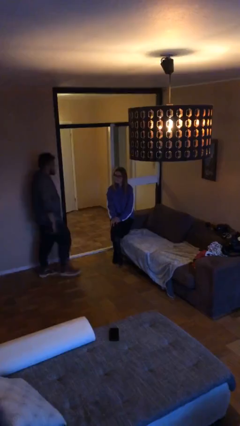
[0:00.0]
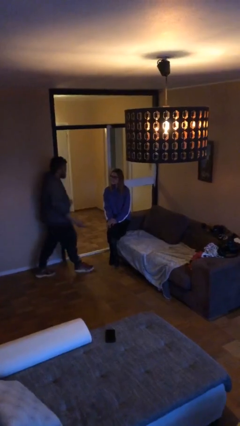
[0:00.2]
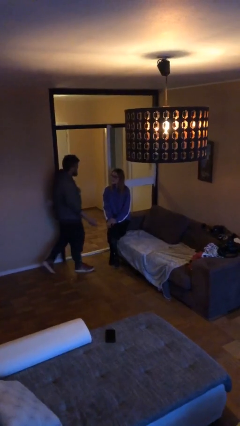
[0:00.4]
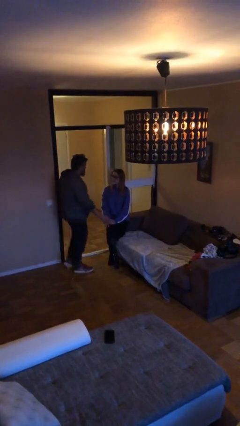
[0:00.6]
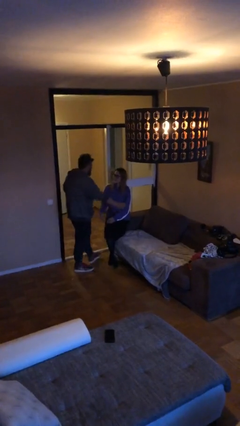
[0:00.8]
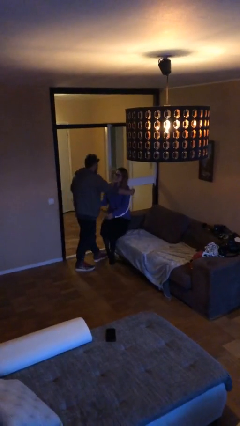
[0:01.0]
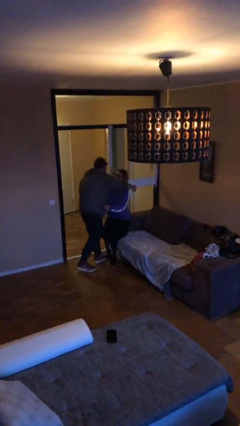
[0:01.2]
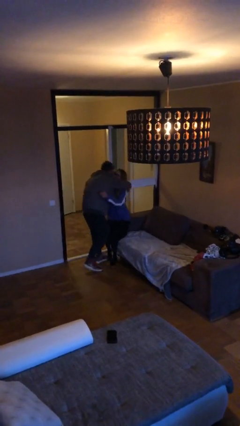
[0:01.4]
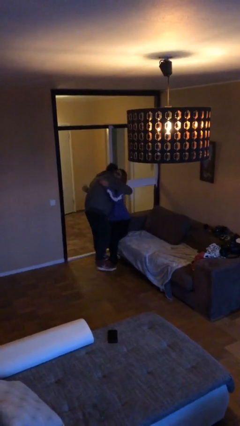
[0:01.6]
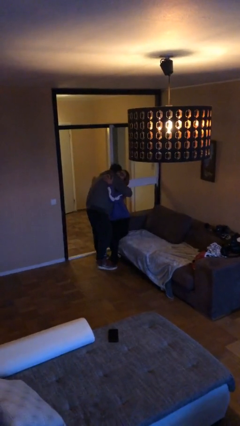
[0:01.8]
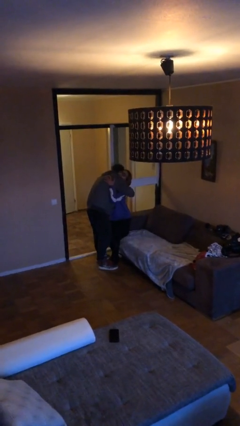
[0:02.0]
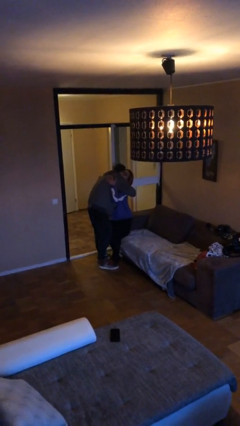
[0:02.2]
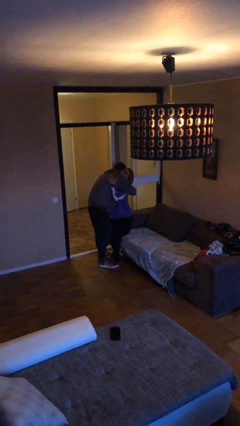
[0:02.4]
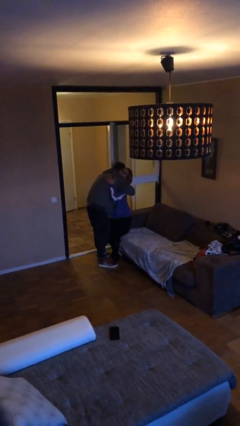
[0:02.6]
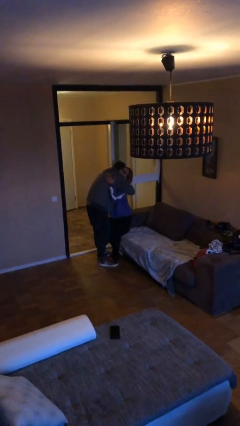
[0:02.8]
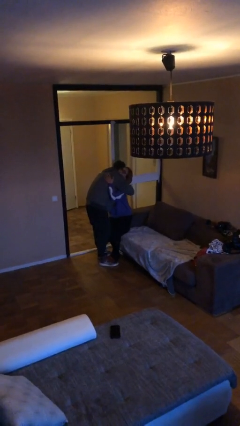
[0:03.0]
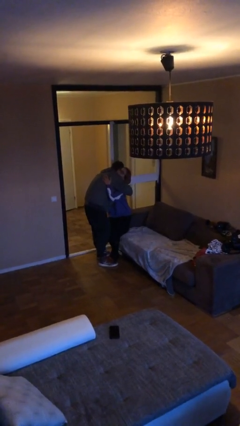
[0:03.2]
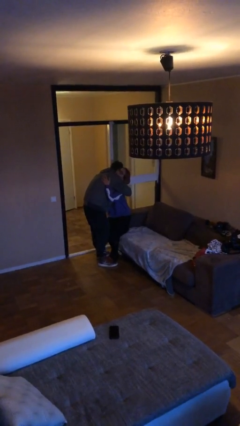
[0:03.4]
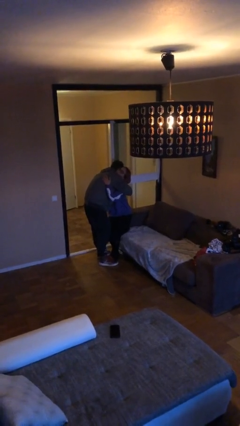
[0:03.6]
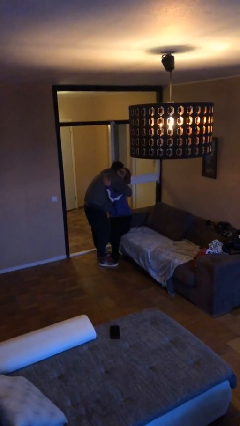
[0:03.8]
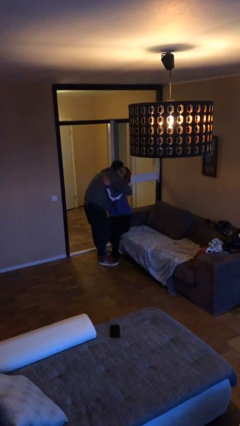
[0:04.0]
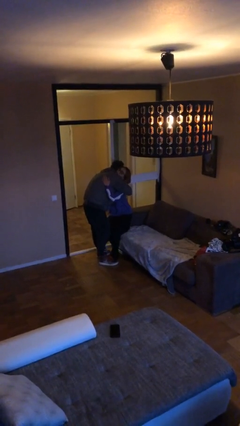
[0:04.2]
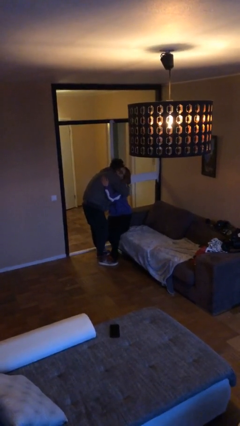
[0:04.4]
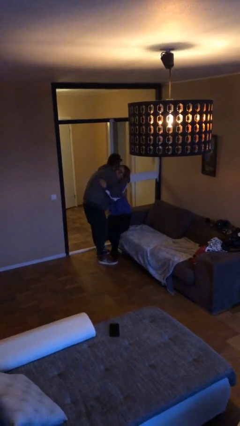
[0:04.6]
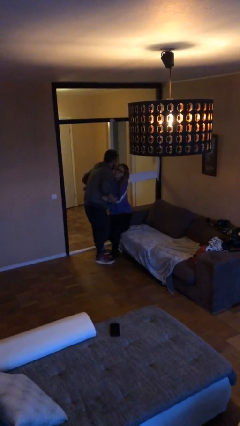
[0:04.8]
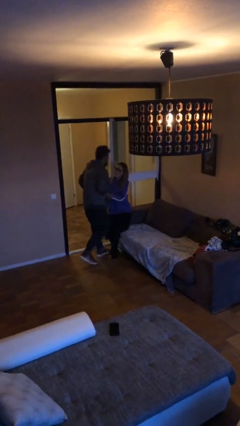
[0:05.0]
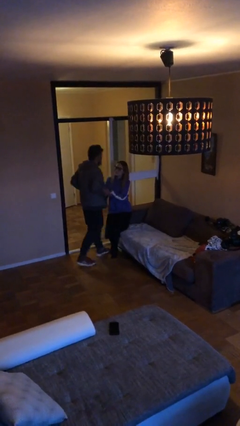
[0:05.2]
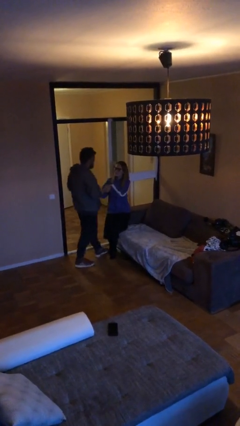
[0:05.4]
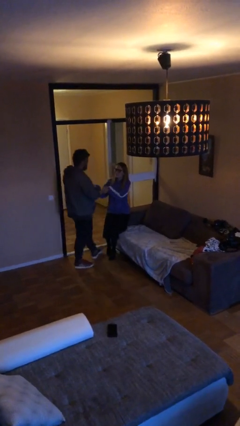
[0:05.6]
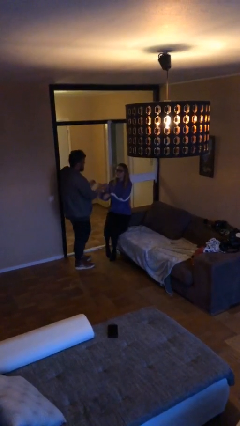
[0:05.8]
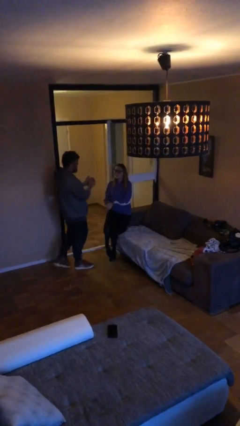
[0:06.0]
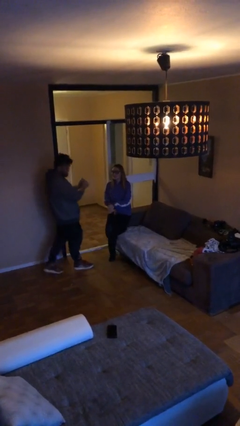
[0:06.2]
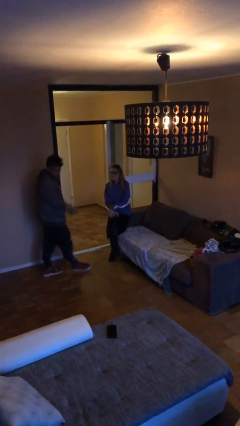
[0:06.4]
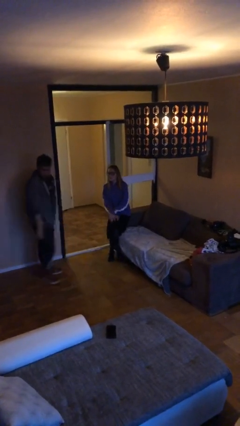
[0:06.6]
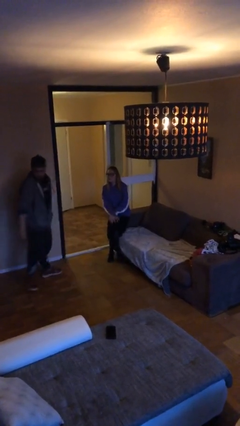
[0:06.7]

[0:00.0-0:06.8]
person embraces person

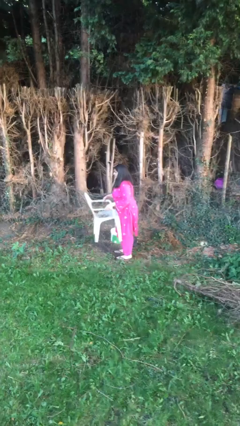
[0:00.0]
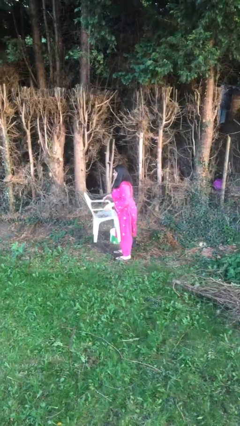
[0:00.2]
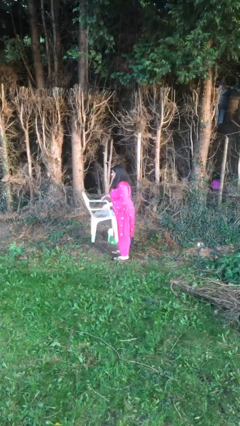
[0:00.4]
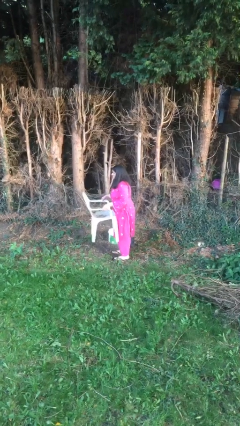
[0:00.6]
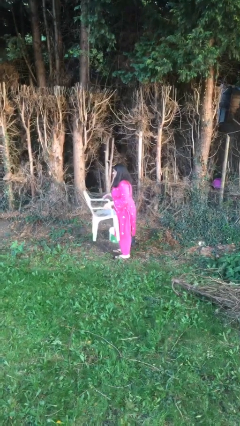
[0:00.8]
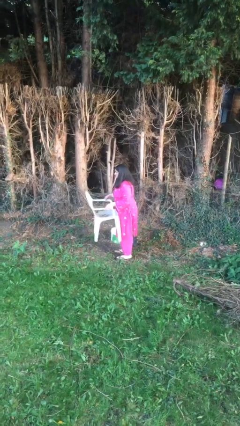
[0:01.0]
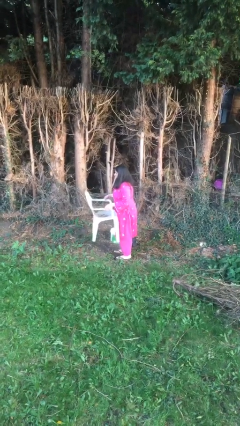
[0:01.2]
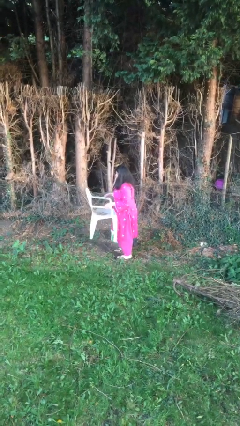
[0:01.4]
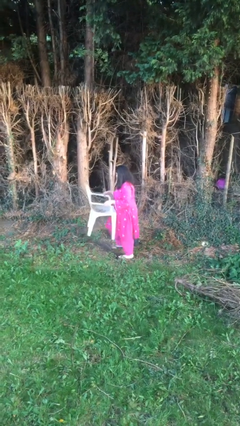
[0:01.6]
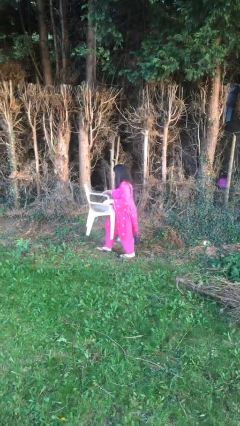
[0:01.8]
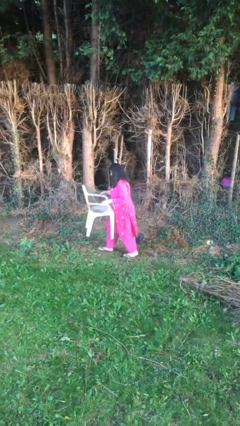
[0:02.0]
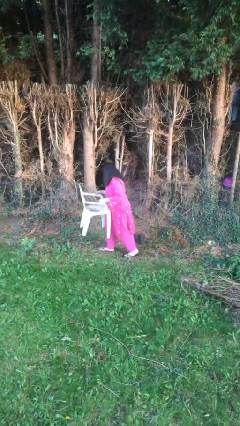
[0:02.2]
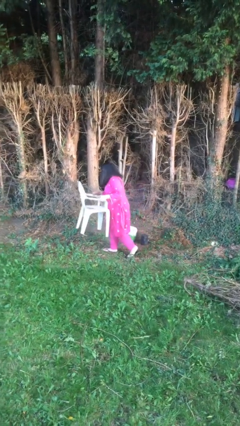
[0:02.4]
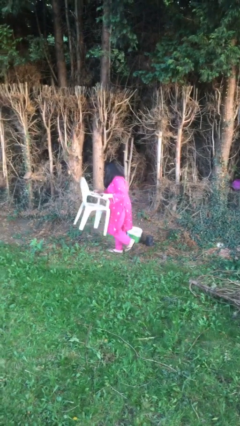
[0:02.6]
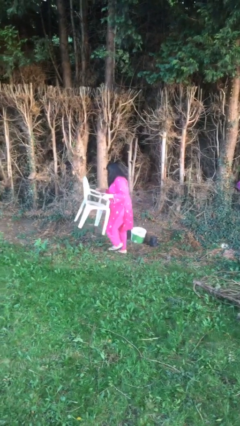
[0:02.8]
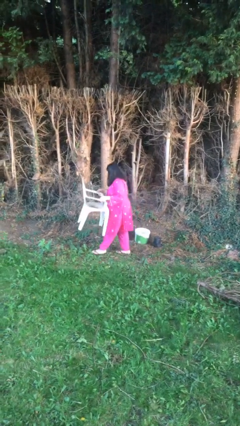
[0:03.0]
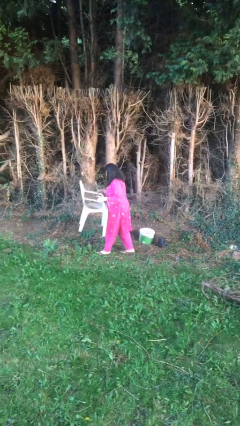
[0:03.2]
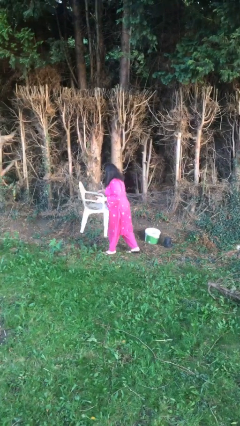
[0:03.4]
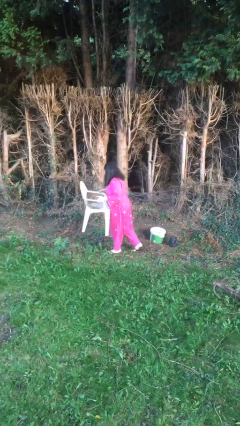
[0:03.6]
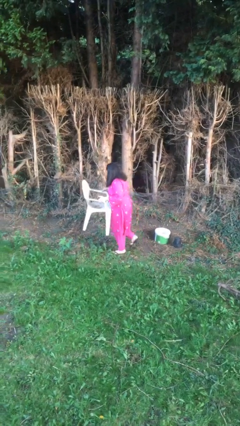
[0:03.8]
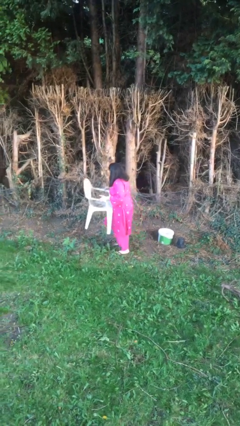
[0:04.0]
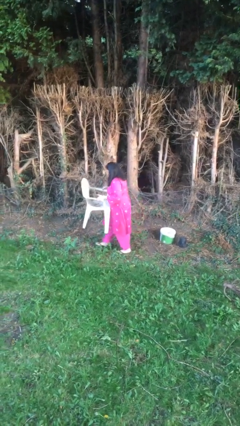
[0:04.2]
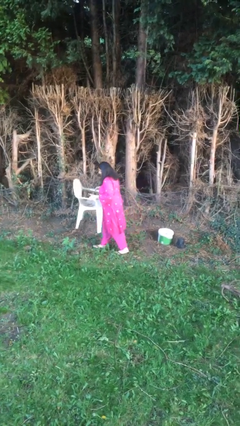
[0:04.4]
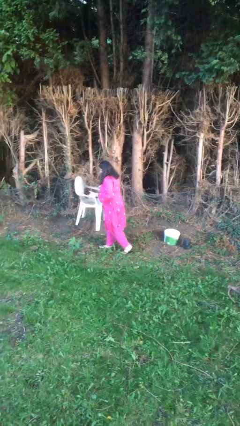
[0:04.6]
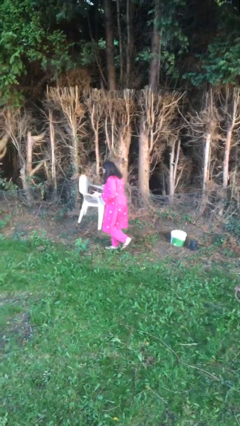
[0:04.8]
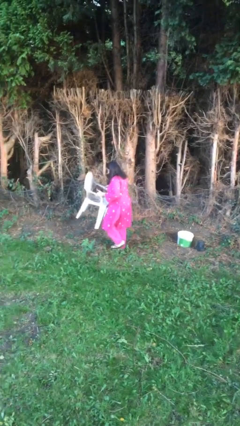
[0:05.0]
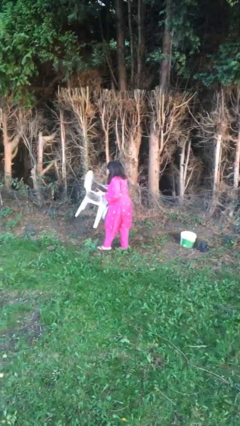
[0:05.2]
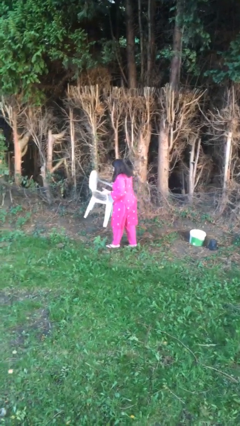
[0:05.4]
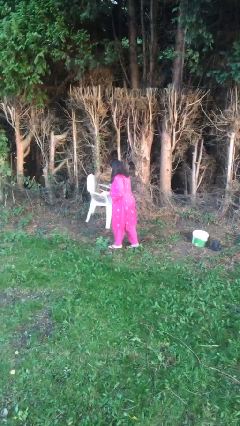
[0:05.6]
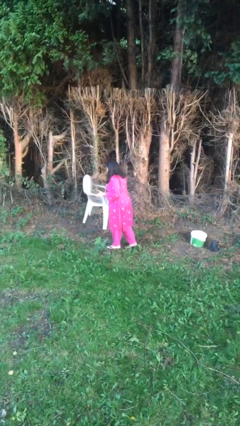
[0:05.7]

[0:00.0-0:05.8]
person carries heavy object

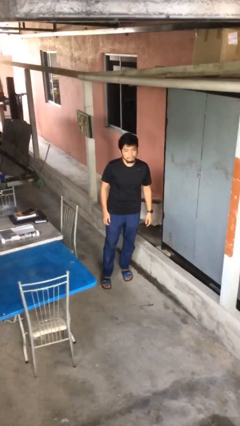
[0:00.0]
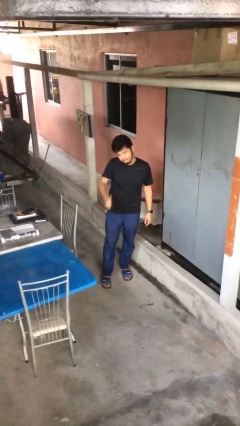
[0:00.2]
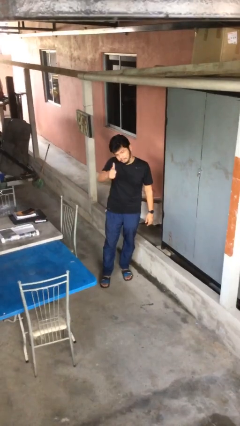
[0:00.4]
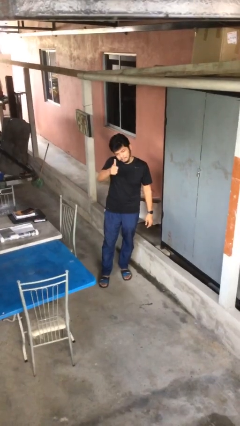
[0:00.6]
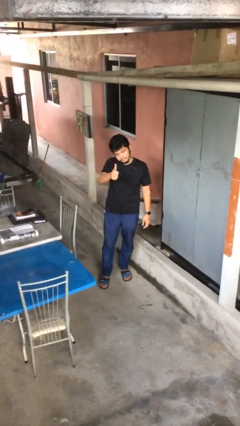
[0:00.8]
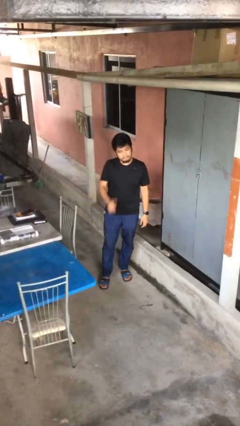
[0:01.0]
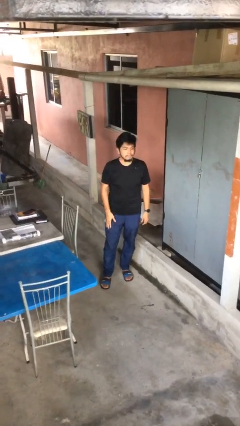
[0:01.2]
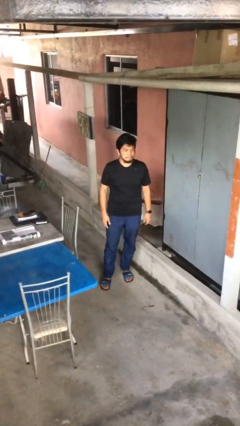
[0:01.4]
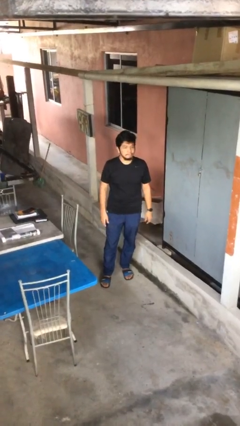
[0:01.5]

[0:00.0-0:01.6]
person gestures thumbs up

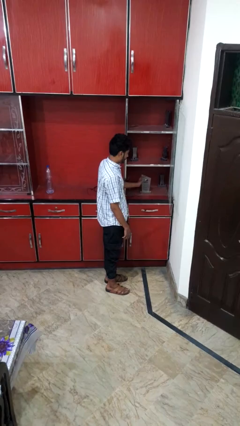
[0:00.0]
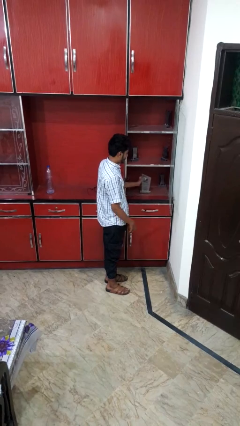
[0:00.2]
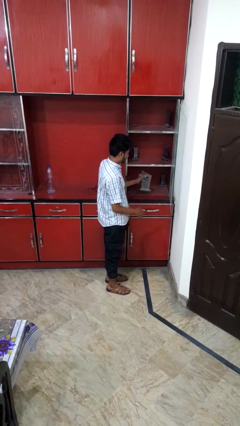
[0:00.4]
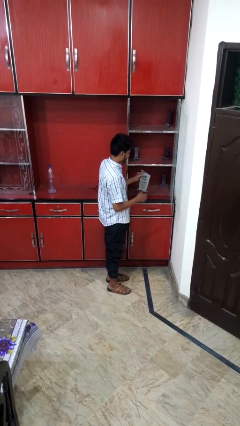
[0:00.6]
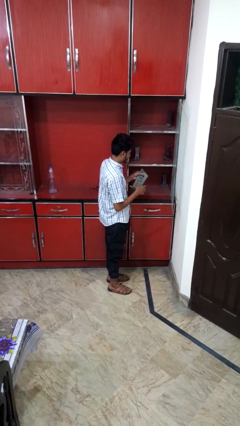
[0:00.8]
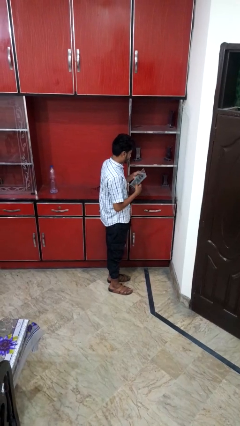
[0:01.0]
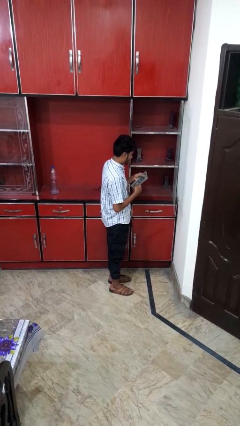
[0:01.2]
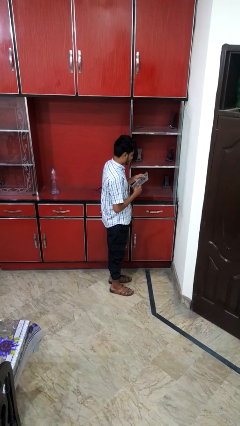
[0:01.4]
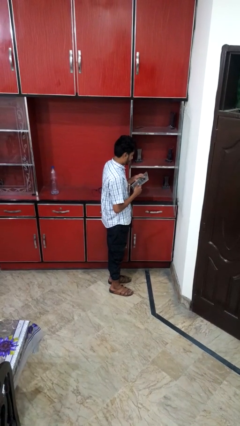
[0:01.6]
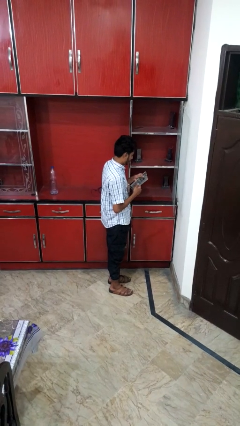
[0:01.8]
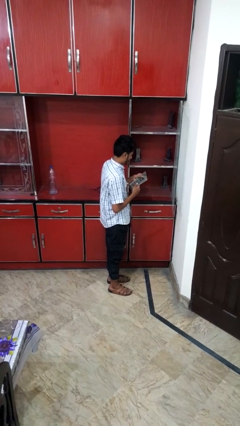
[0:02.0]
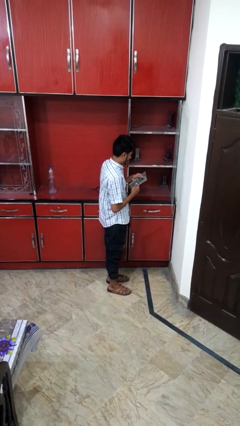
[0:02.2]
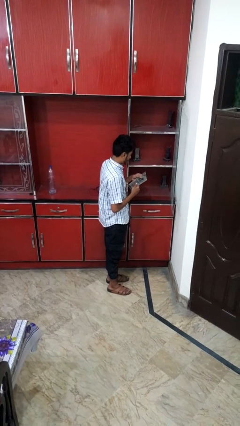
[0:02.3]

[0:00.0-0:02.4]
person picks up object from cabinet

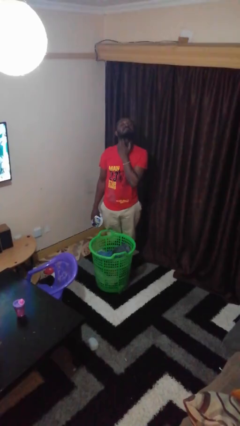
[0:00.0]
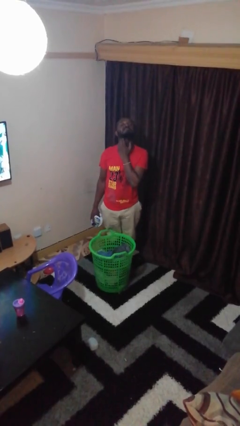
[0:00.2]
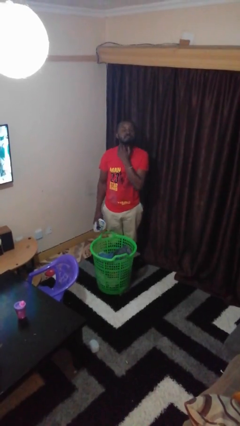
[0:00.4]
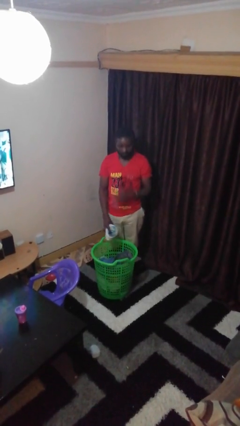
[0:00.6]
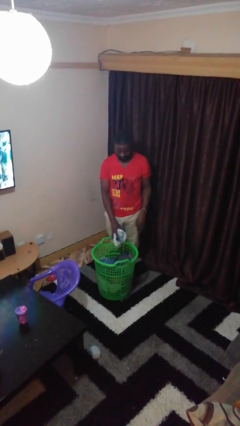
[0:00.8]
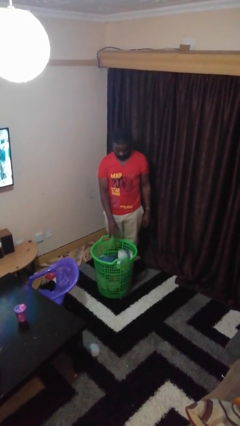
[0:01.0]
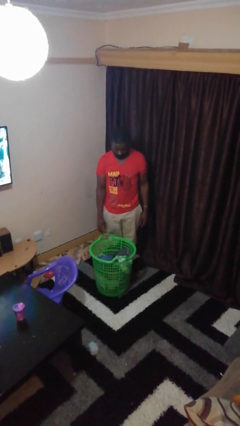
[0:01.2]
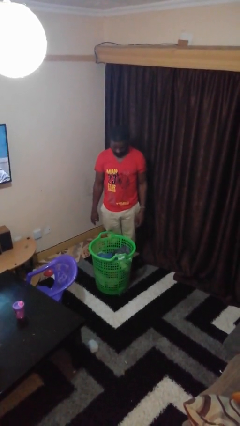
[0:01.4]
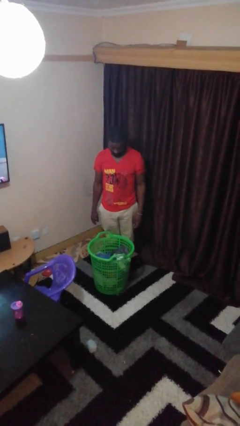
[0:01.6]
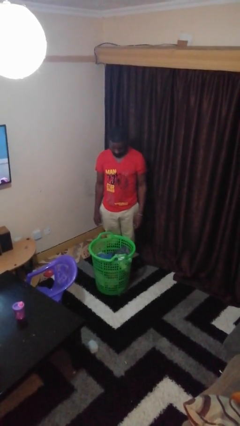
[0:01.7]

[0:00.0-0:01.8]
person puts object into basket
